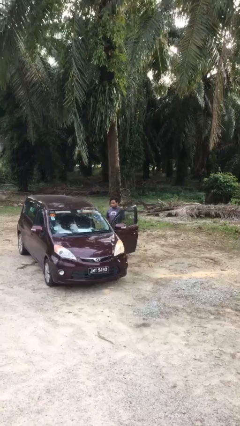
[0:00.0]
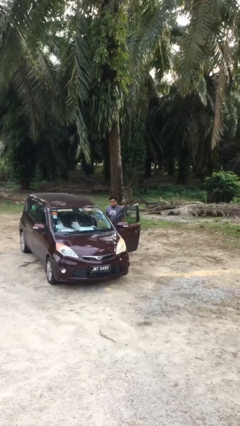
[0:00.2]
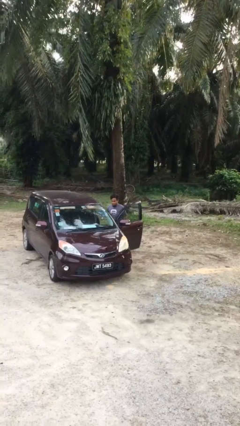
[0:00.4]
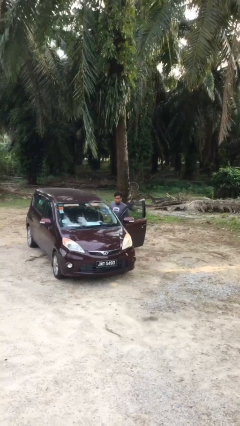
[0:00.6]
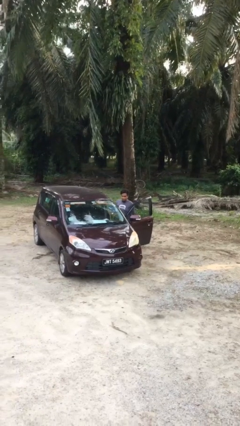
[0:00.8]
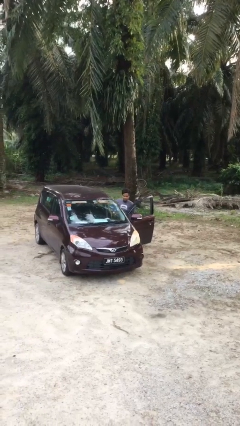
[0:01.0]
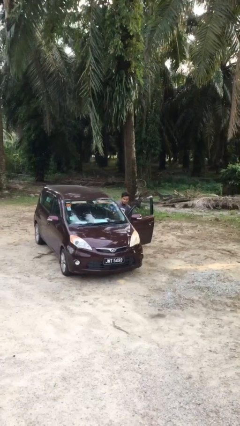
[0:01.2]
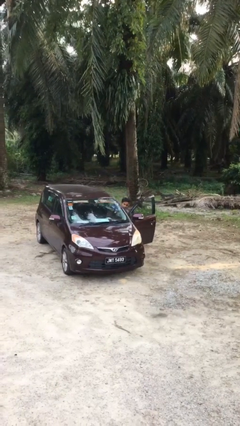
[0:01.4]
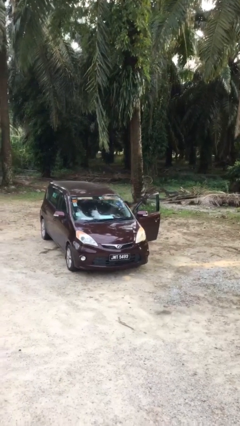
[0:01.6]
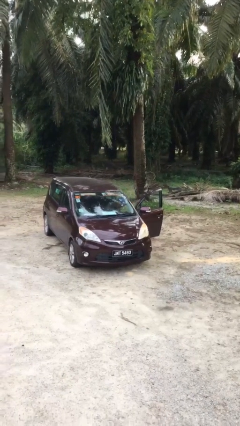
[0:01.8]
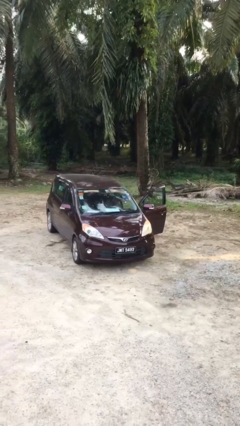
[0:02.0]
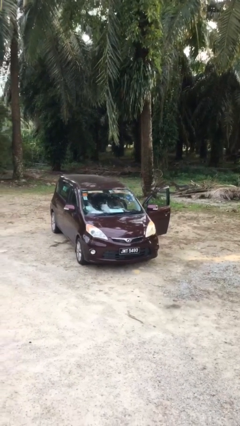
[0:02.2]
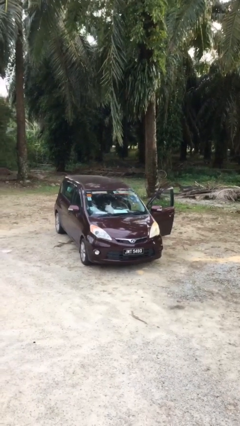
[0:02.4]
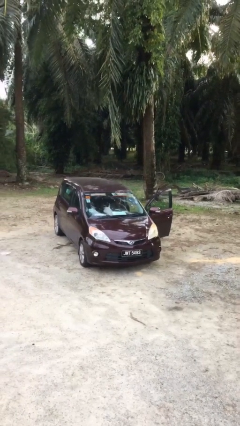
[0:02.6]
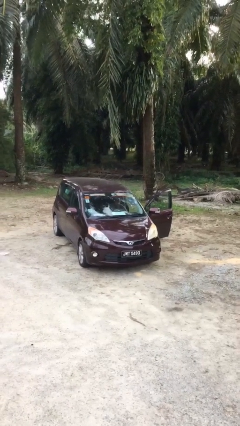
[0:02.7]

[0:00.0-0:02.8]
person enters car

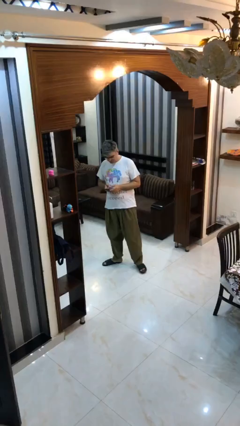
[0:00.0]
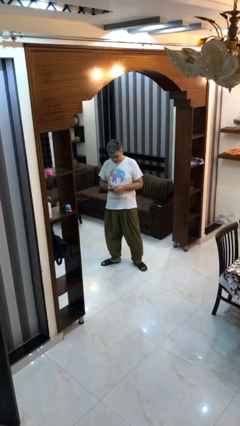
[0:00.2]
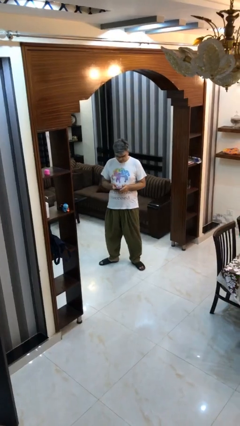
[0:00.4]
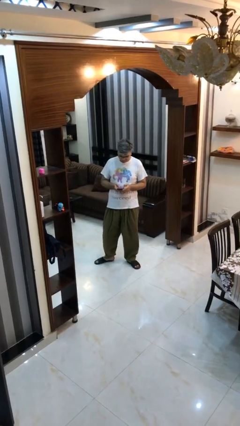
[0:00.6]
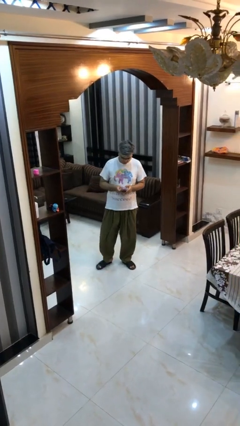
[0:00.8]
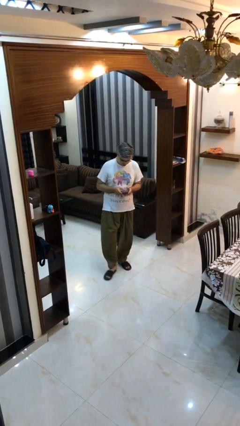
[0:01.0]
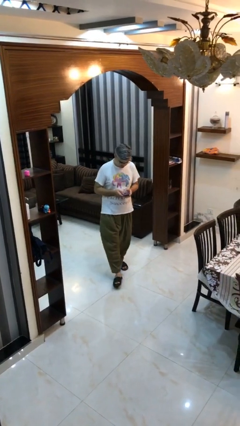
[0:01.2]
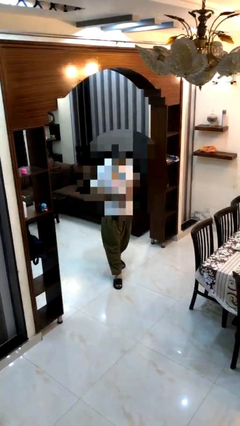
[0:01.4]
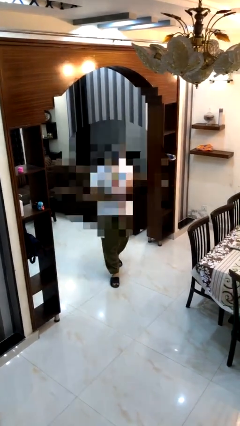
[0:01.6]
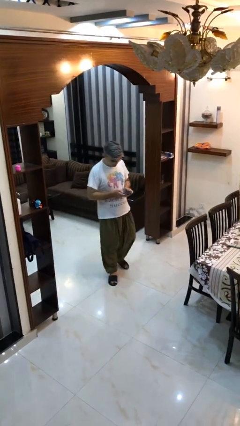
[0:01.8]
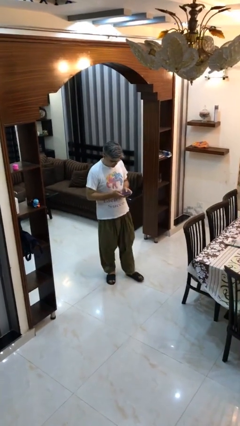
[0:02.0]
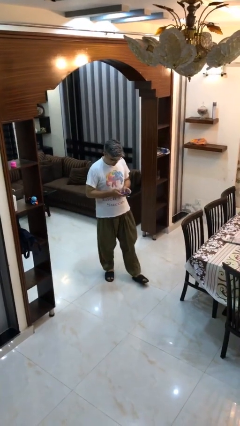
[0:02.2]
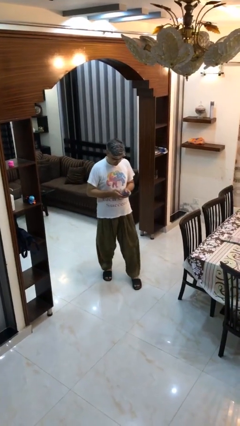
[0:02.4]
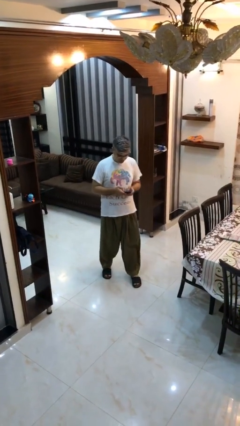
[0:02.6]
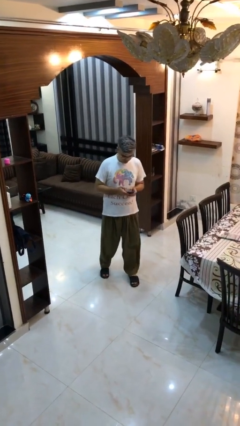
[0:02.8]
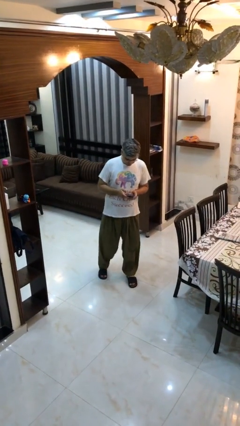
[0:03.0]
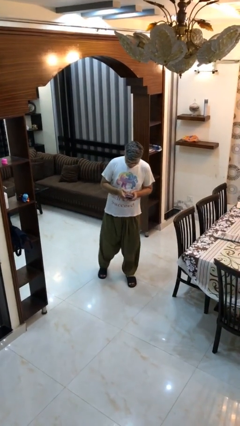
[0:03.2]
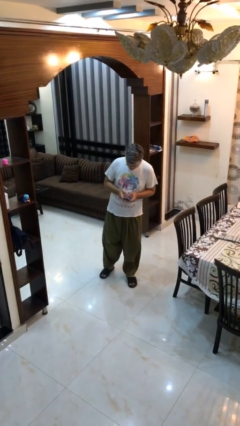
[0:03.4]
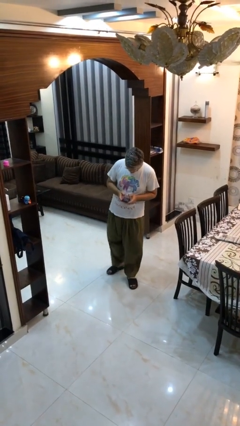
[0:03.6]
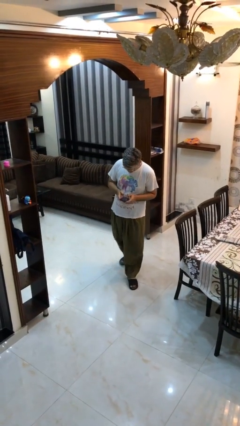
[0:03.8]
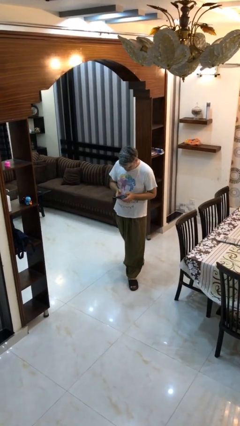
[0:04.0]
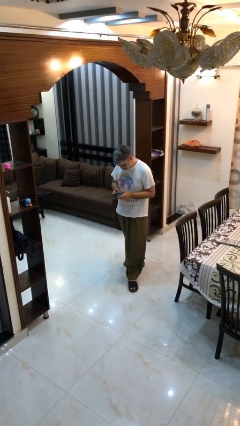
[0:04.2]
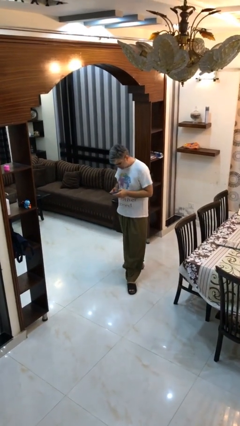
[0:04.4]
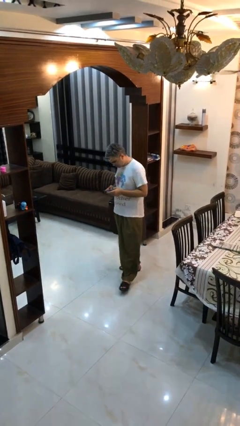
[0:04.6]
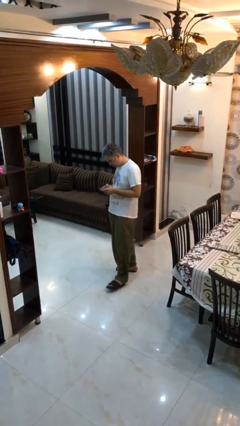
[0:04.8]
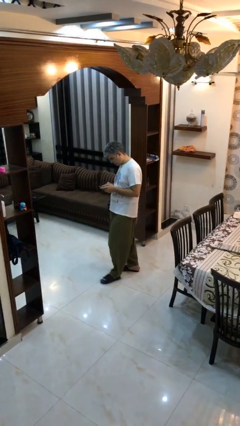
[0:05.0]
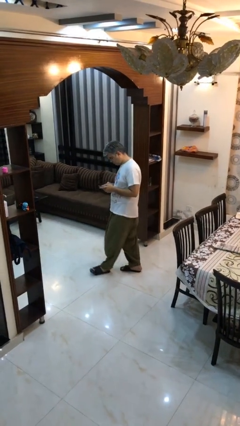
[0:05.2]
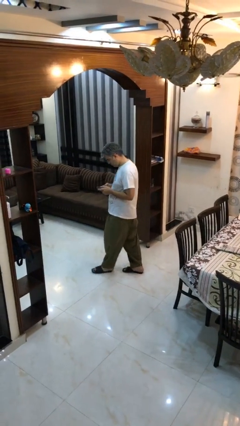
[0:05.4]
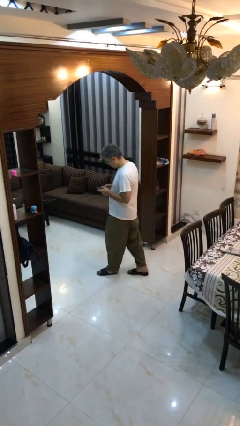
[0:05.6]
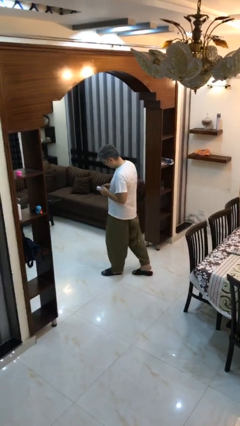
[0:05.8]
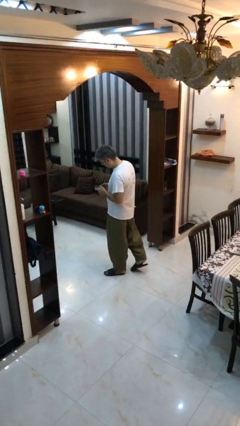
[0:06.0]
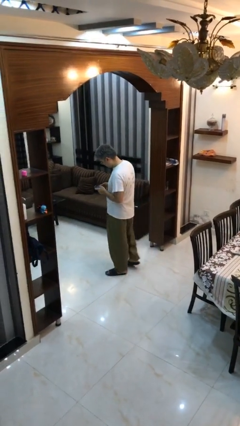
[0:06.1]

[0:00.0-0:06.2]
person texts on phone

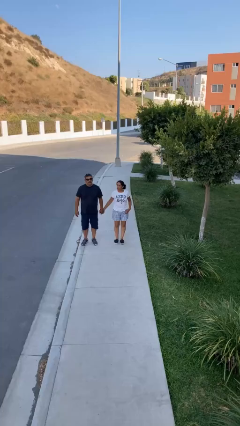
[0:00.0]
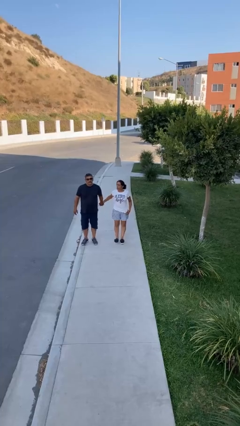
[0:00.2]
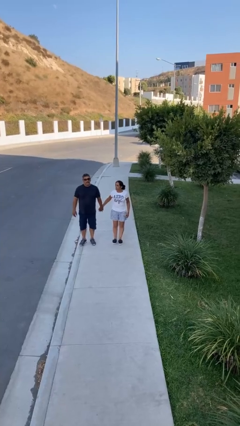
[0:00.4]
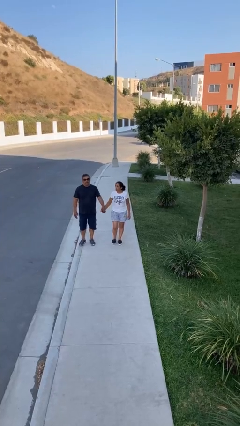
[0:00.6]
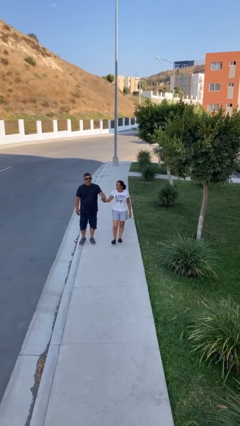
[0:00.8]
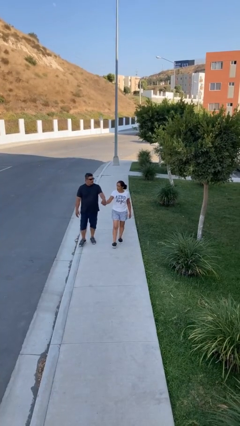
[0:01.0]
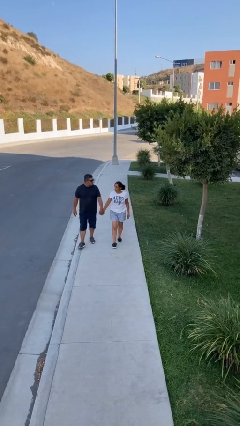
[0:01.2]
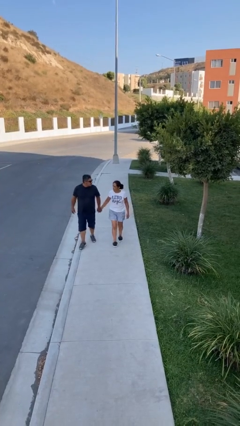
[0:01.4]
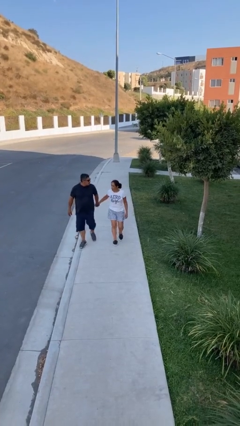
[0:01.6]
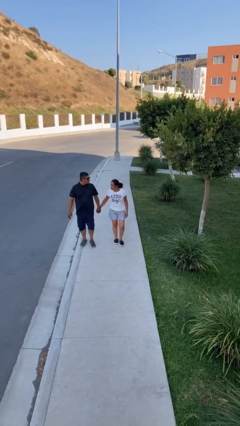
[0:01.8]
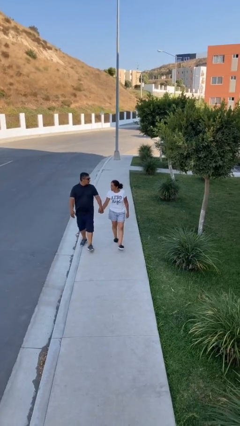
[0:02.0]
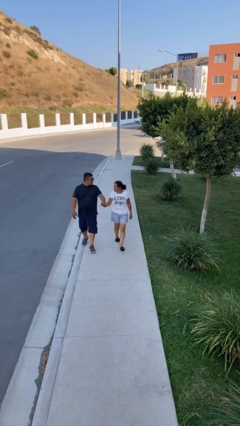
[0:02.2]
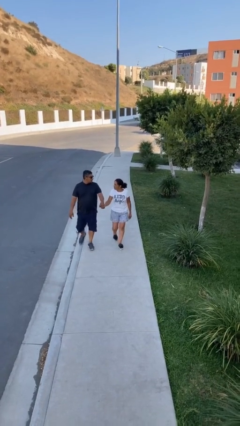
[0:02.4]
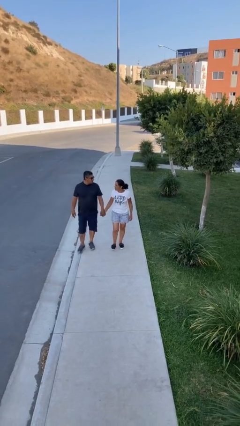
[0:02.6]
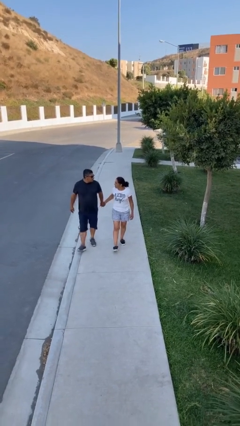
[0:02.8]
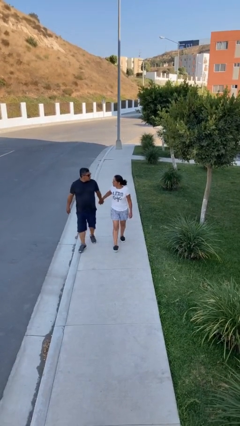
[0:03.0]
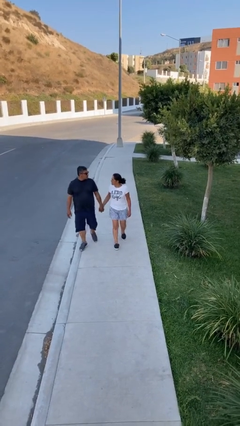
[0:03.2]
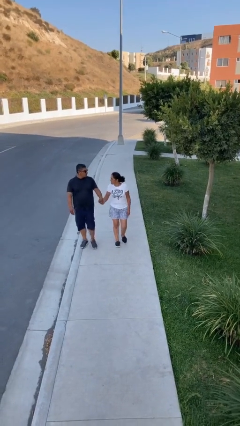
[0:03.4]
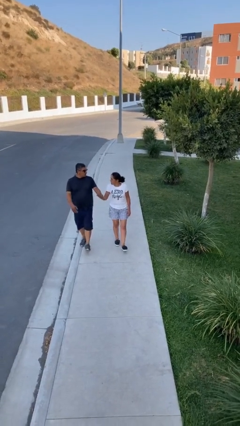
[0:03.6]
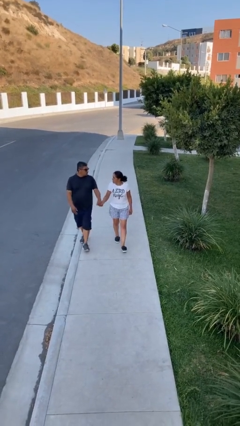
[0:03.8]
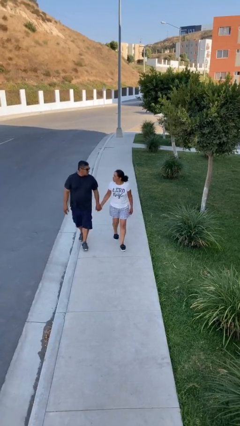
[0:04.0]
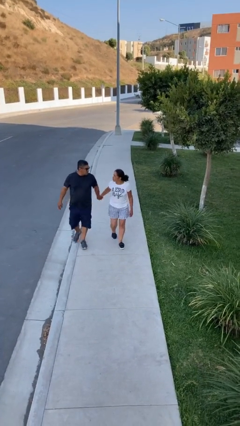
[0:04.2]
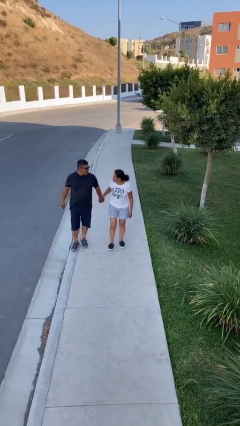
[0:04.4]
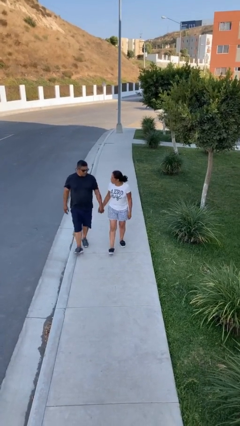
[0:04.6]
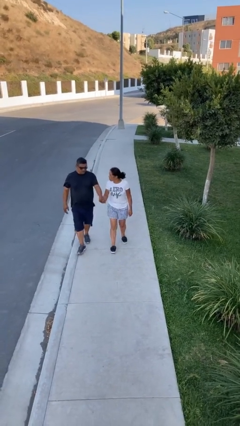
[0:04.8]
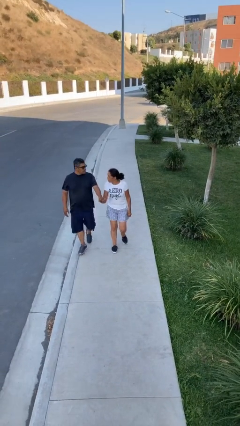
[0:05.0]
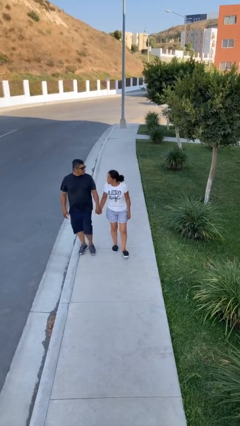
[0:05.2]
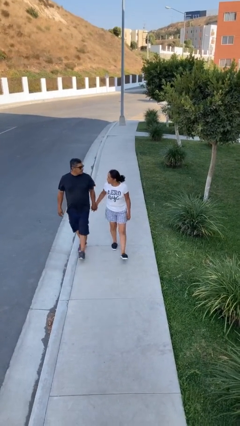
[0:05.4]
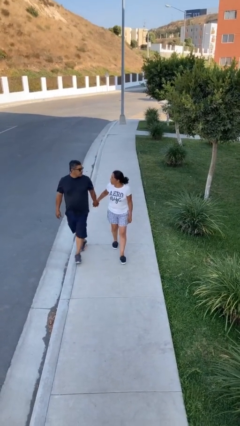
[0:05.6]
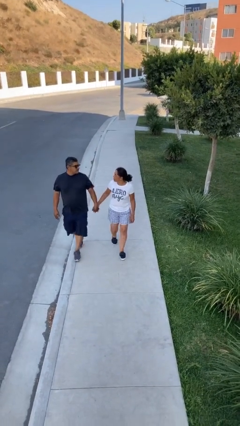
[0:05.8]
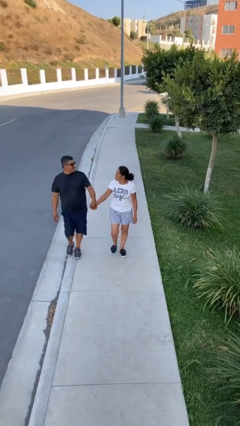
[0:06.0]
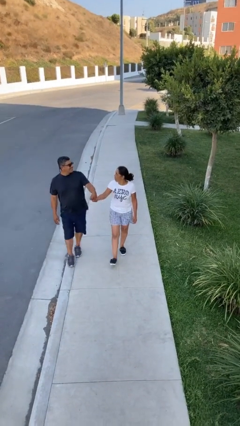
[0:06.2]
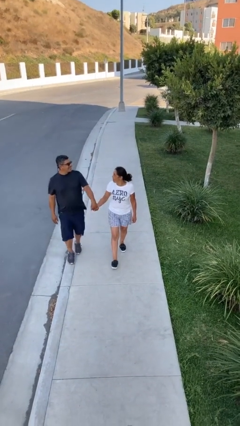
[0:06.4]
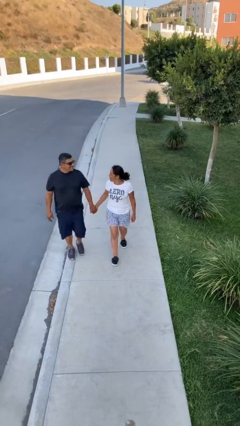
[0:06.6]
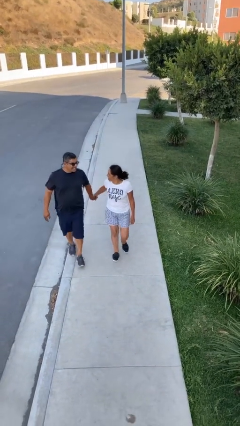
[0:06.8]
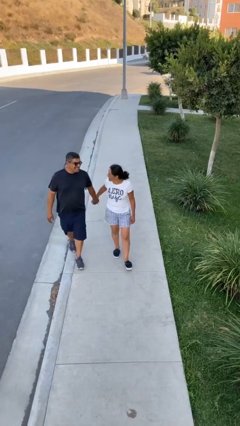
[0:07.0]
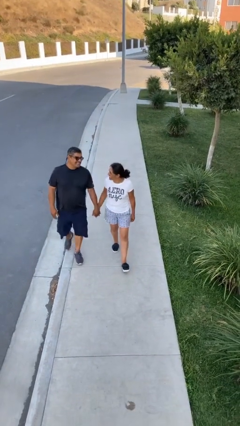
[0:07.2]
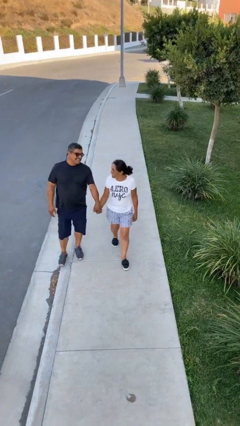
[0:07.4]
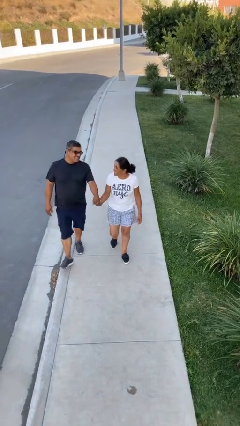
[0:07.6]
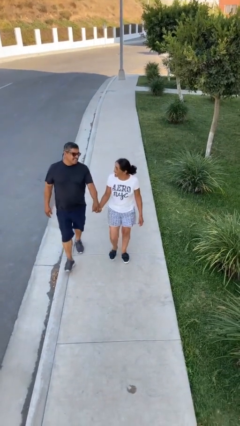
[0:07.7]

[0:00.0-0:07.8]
person holds hand

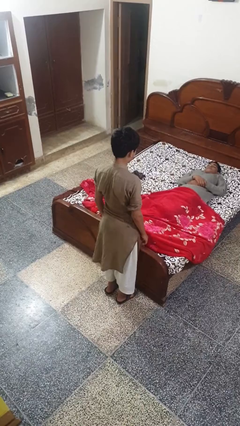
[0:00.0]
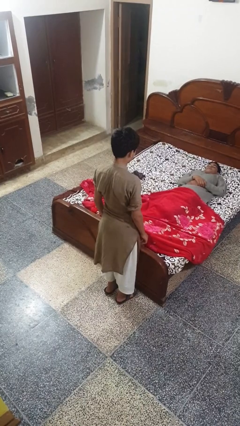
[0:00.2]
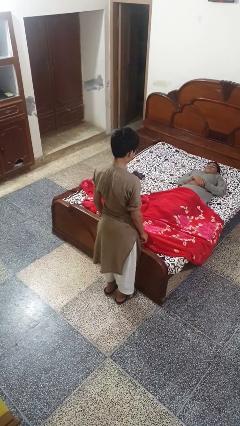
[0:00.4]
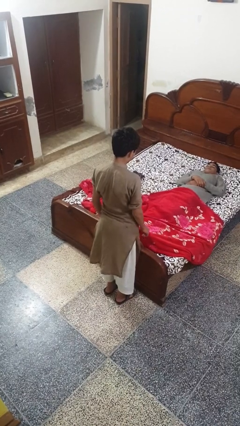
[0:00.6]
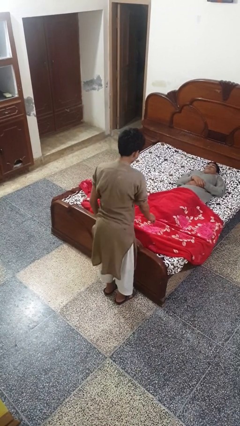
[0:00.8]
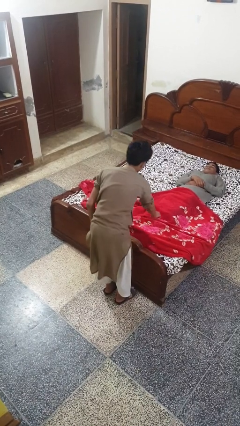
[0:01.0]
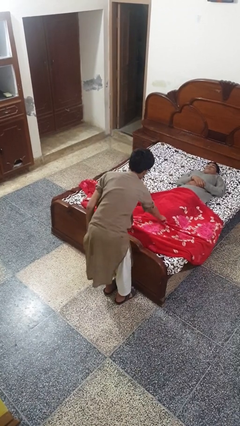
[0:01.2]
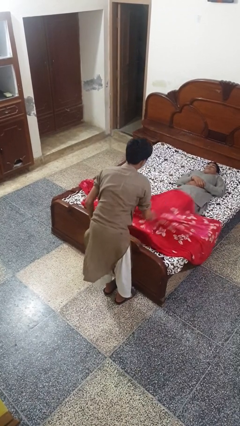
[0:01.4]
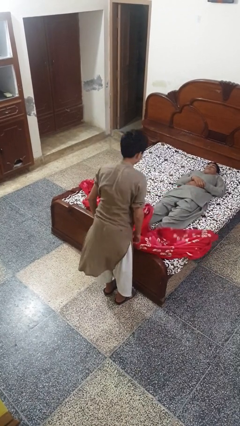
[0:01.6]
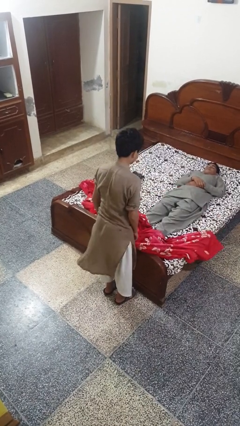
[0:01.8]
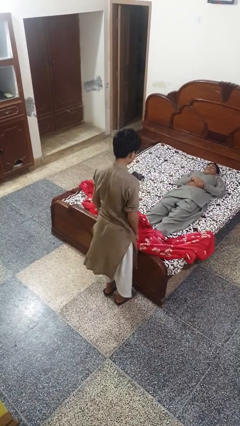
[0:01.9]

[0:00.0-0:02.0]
person uncovers friend with blanket
